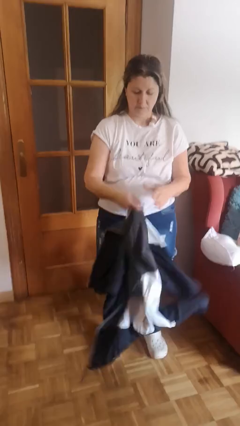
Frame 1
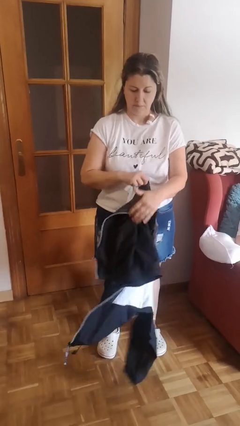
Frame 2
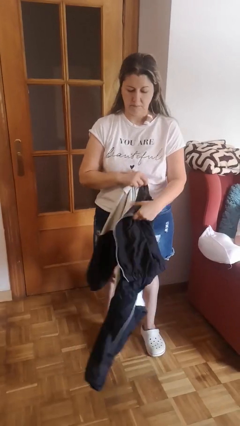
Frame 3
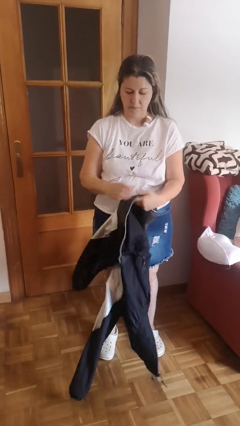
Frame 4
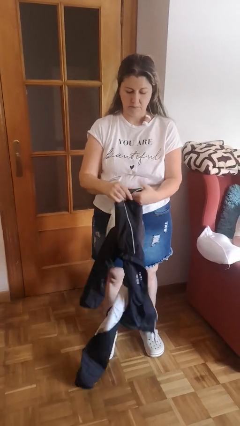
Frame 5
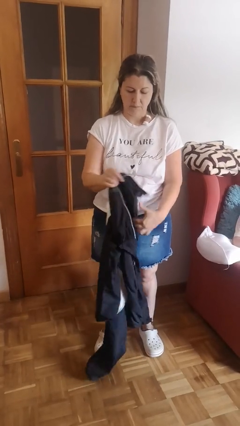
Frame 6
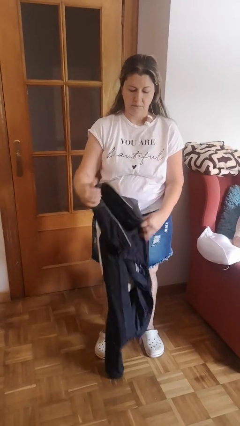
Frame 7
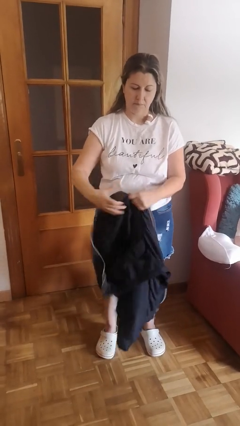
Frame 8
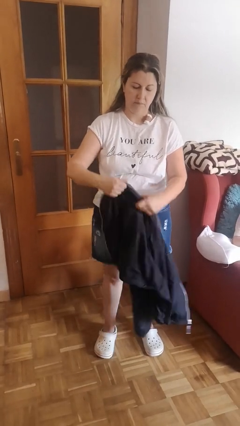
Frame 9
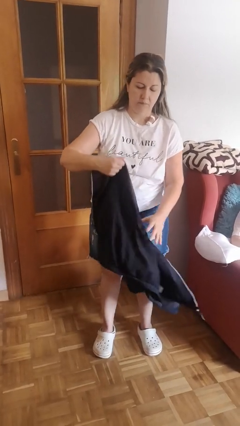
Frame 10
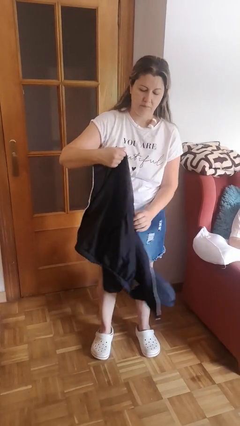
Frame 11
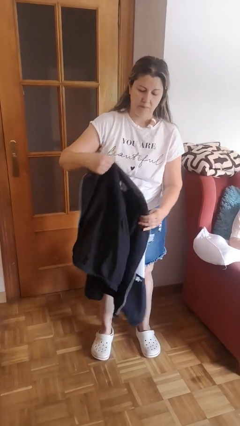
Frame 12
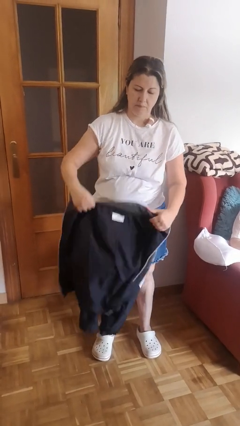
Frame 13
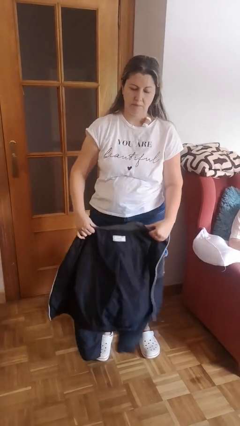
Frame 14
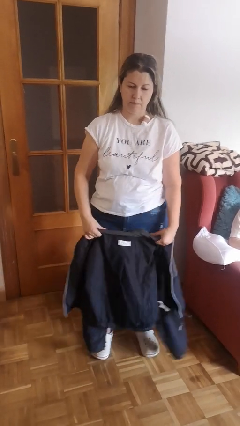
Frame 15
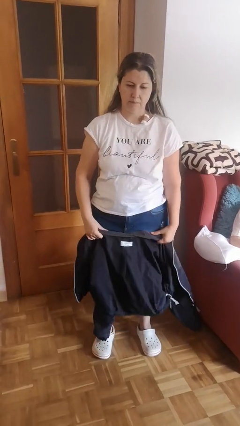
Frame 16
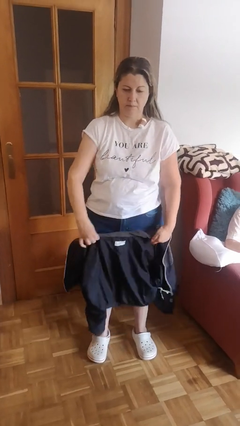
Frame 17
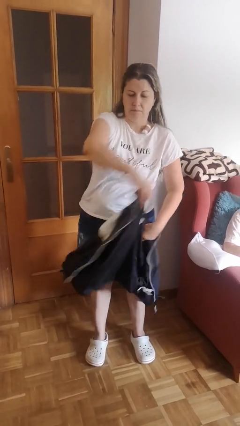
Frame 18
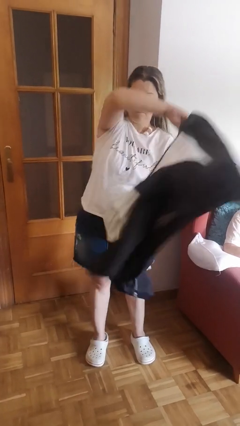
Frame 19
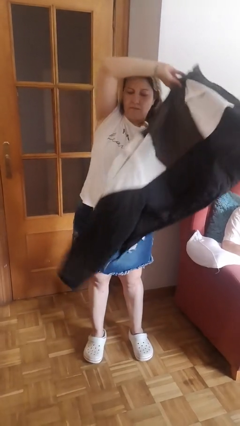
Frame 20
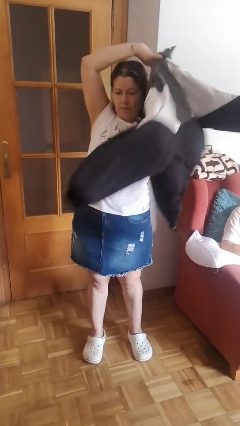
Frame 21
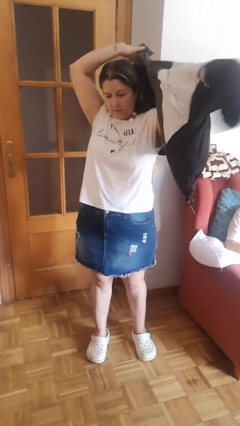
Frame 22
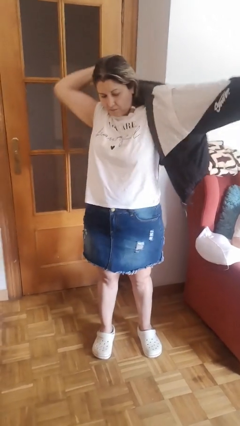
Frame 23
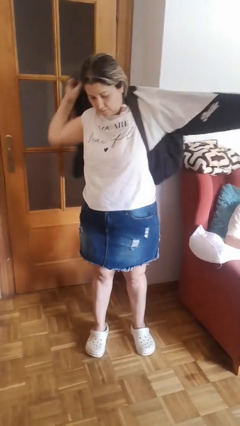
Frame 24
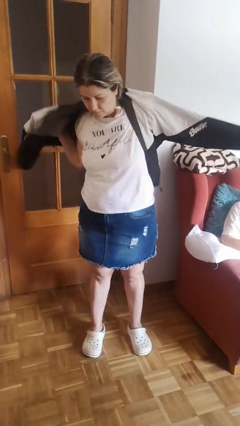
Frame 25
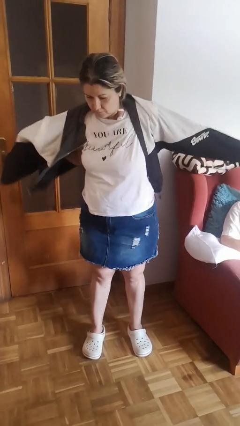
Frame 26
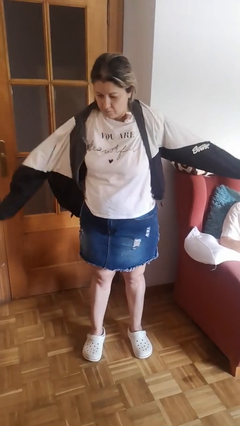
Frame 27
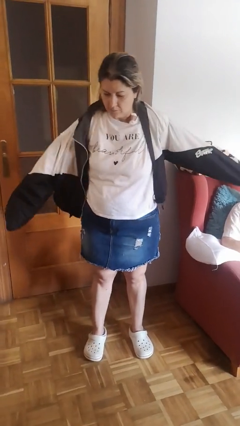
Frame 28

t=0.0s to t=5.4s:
person puts on jacket

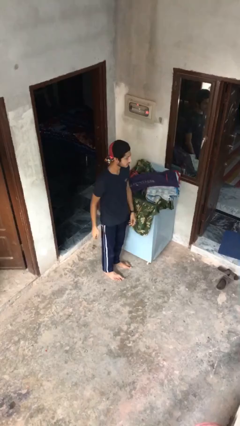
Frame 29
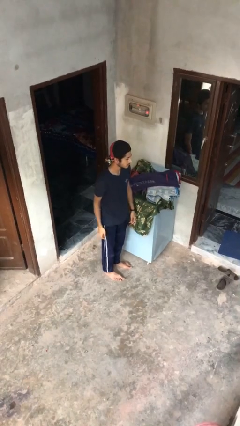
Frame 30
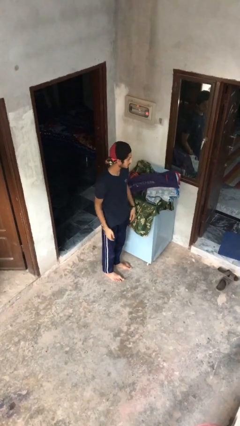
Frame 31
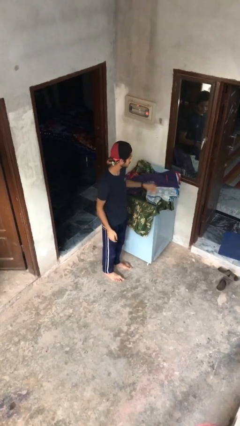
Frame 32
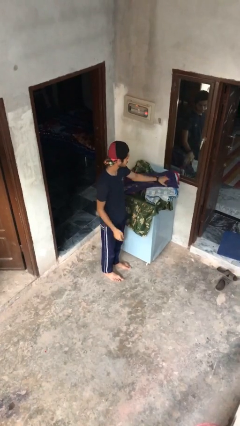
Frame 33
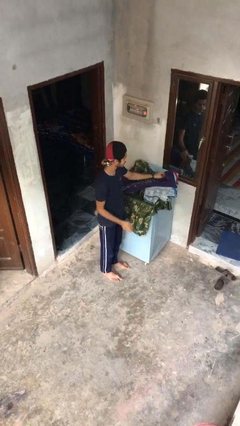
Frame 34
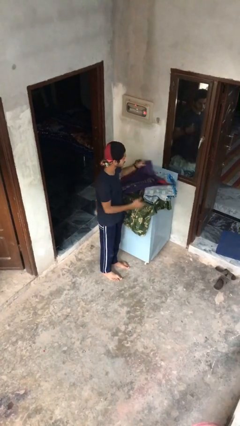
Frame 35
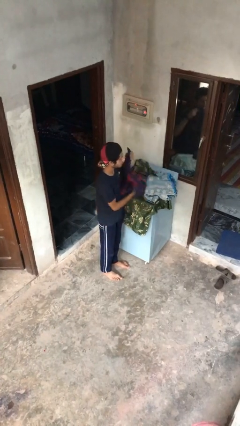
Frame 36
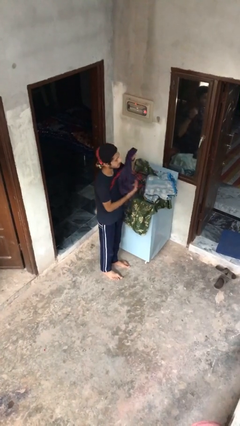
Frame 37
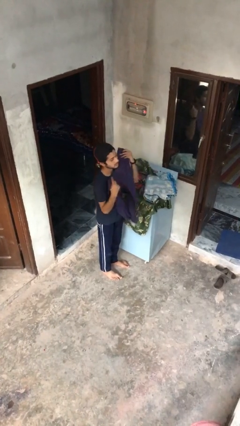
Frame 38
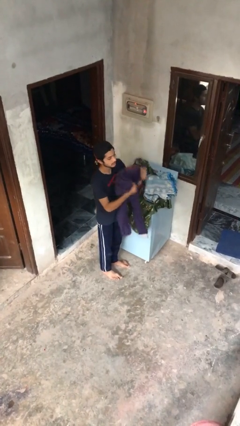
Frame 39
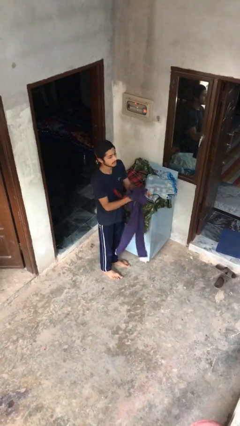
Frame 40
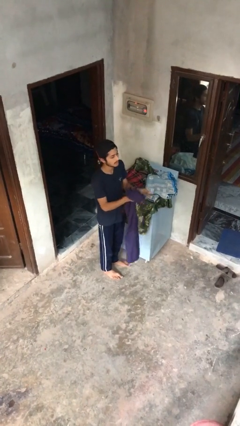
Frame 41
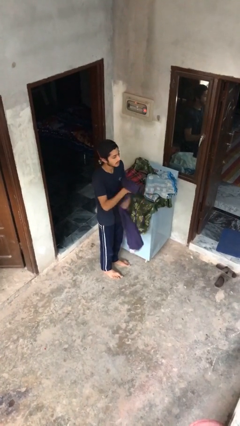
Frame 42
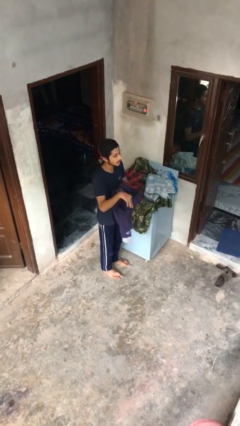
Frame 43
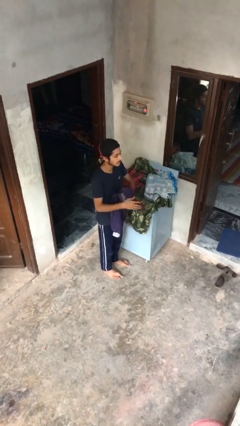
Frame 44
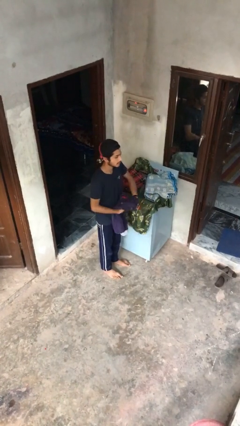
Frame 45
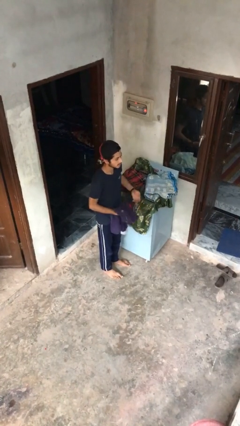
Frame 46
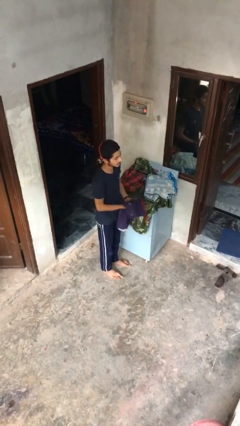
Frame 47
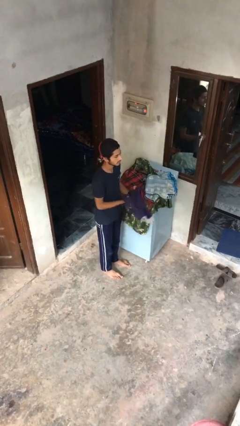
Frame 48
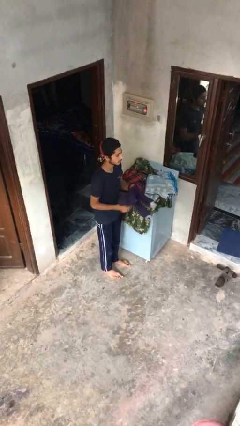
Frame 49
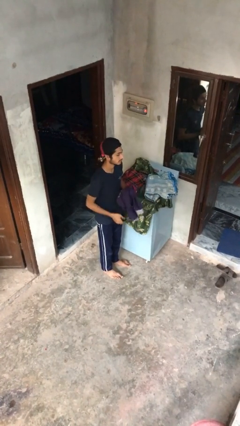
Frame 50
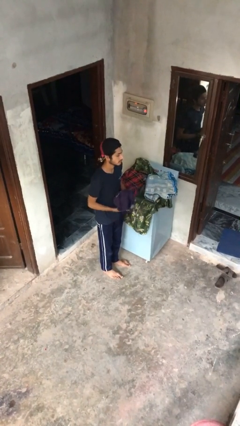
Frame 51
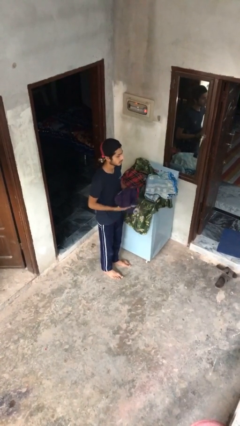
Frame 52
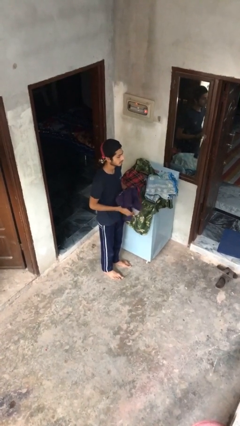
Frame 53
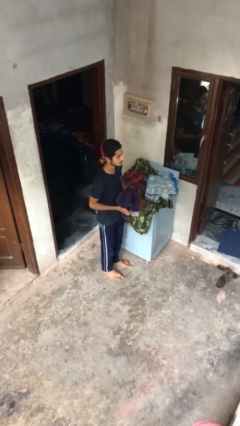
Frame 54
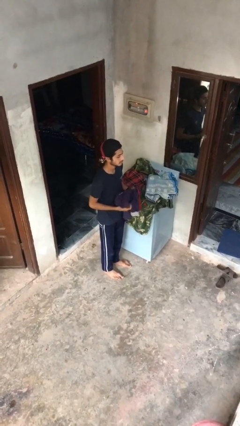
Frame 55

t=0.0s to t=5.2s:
person folds pants

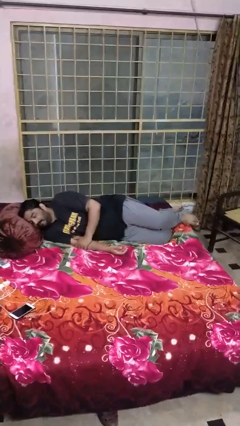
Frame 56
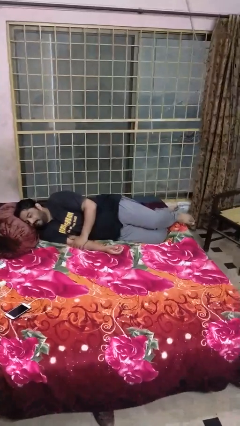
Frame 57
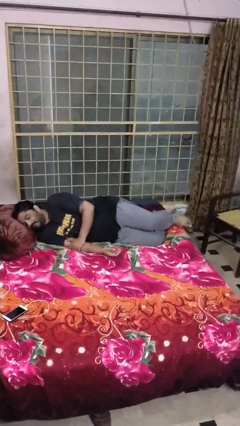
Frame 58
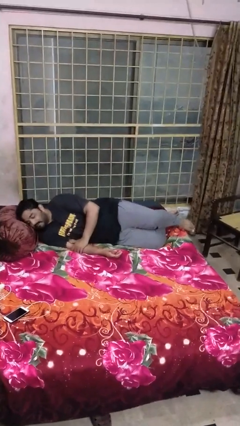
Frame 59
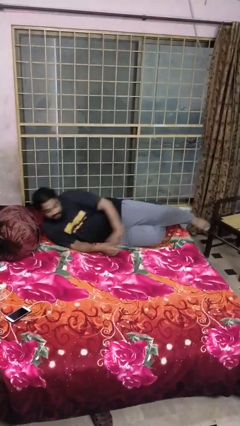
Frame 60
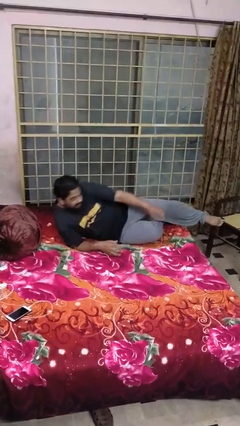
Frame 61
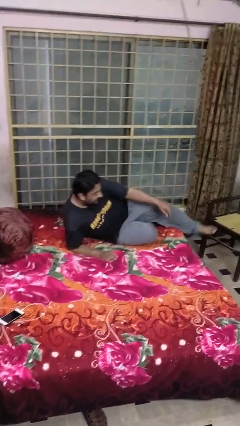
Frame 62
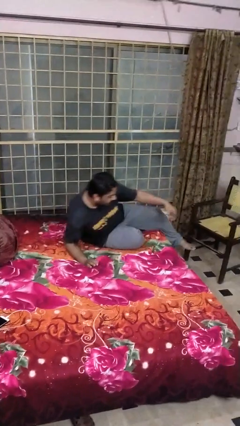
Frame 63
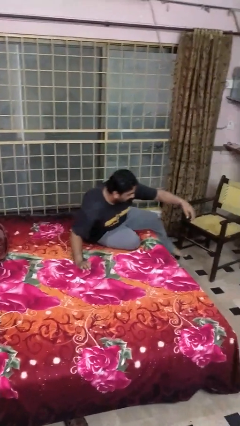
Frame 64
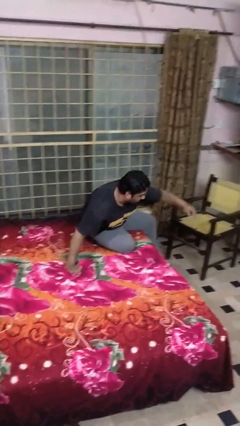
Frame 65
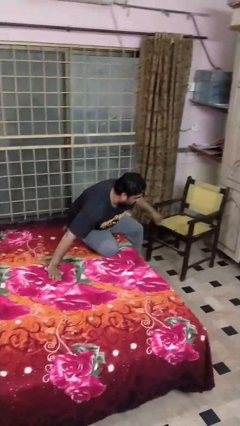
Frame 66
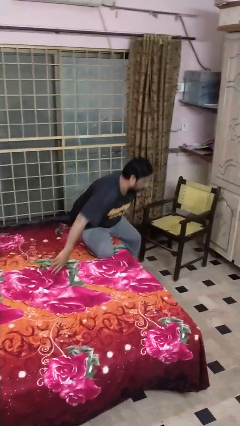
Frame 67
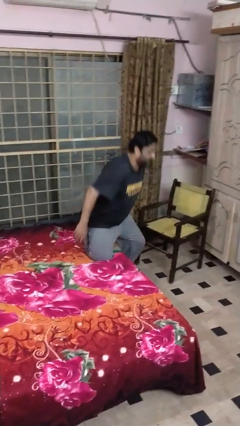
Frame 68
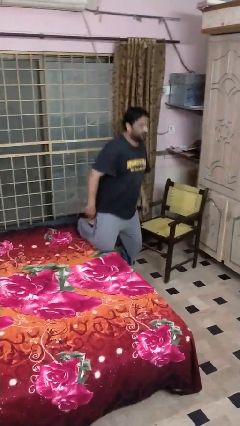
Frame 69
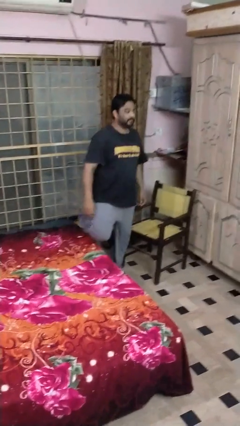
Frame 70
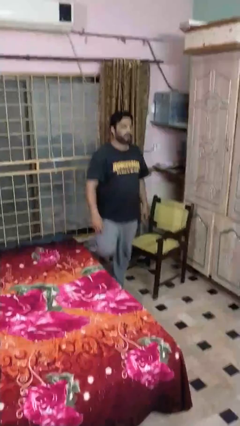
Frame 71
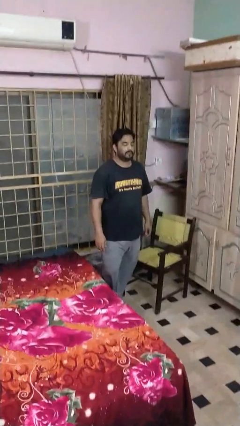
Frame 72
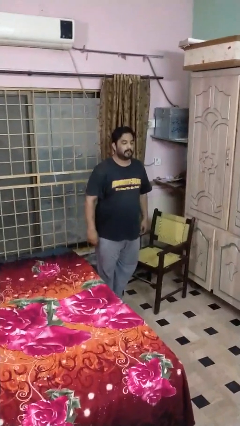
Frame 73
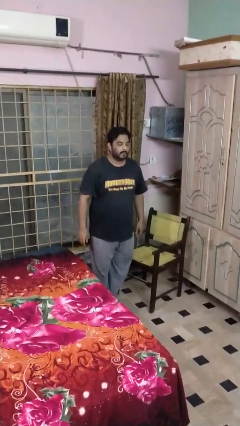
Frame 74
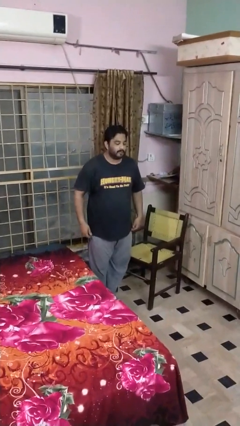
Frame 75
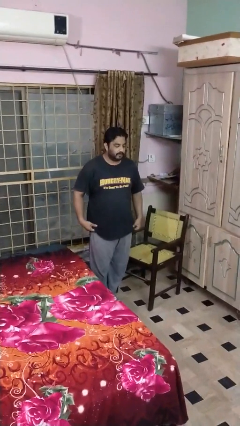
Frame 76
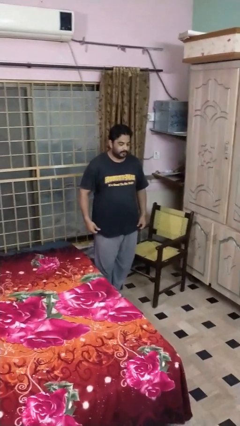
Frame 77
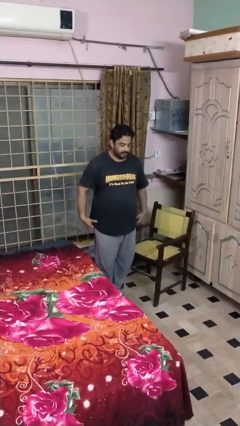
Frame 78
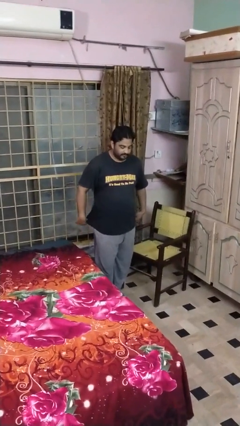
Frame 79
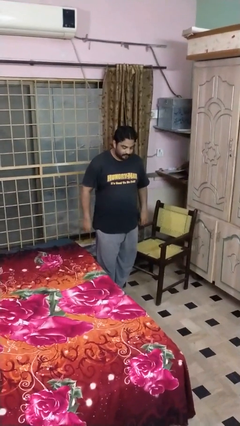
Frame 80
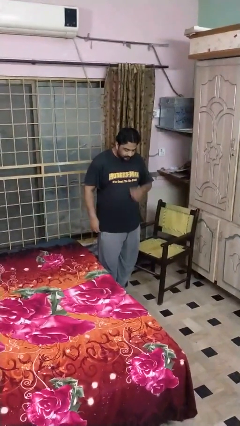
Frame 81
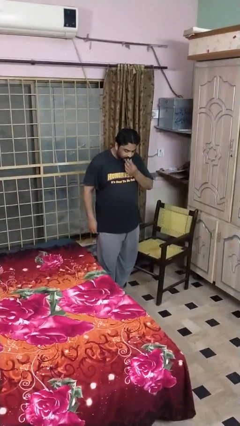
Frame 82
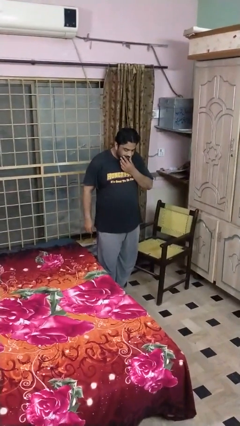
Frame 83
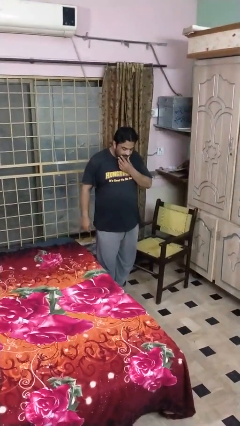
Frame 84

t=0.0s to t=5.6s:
person stands up

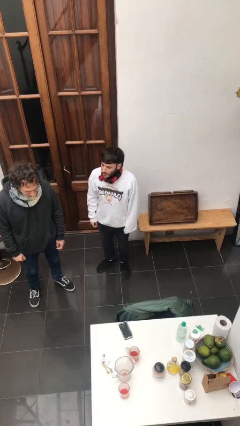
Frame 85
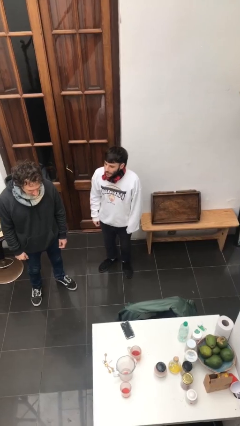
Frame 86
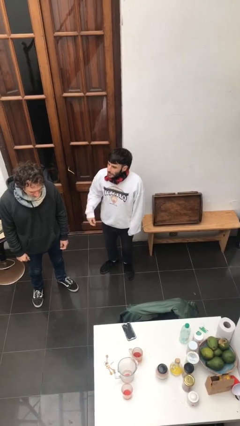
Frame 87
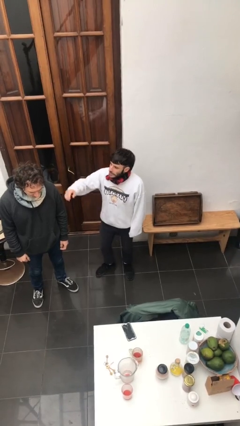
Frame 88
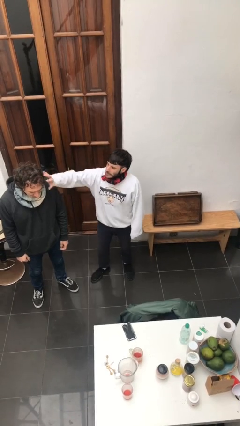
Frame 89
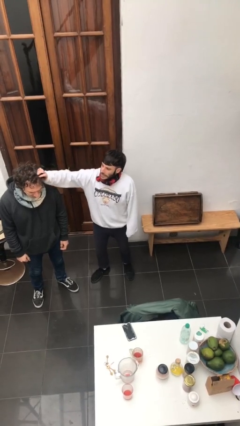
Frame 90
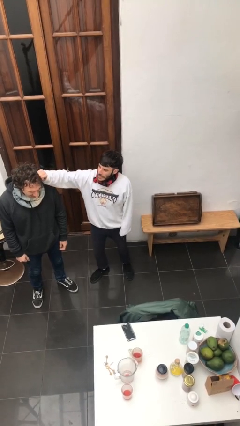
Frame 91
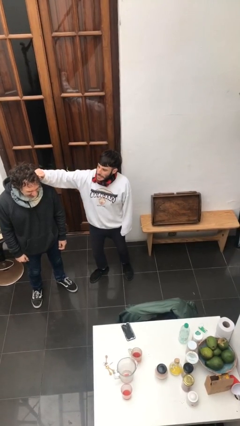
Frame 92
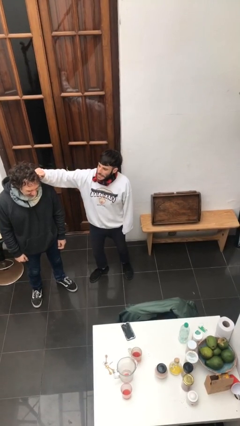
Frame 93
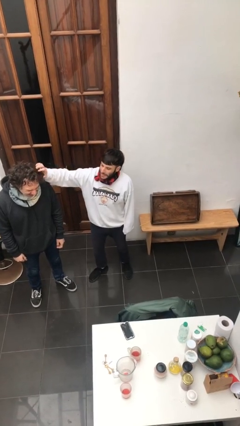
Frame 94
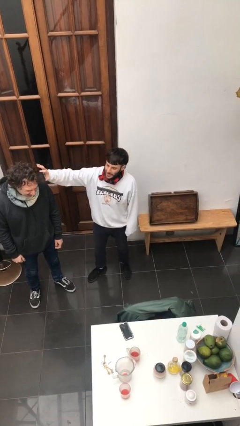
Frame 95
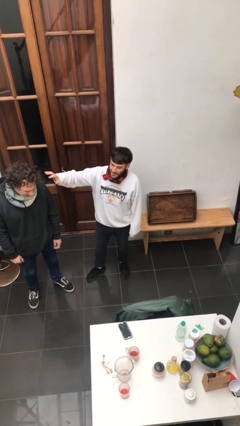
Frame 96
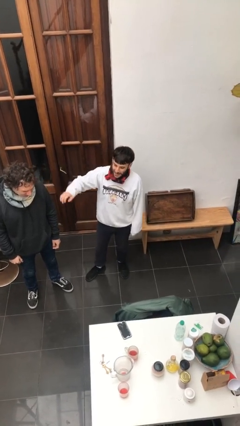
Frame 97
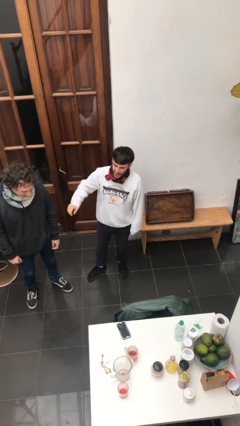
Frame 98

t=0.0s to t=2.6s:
person grabs person by hair
